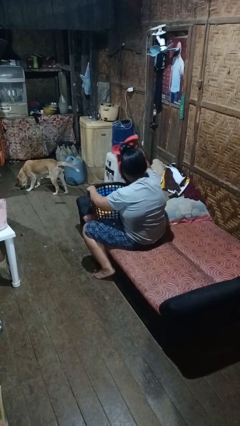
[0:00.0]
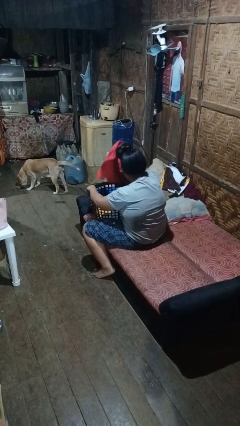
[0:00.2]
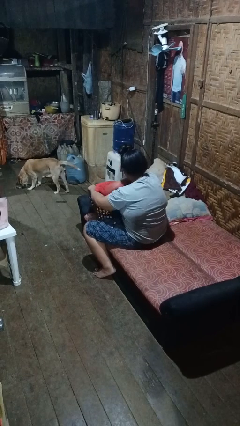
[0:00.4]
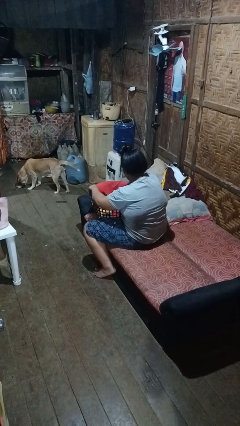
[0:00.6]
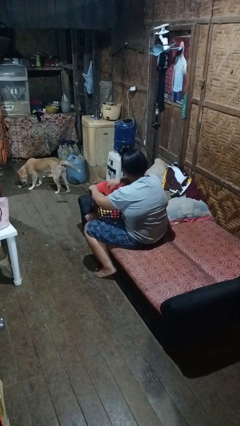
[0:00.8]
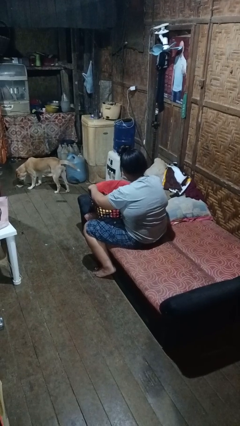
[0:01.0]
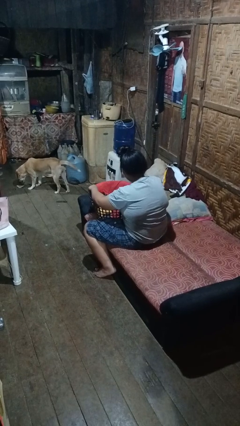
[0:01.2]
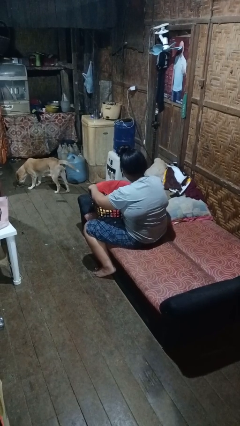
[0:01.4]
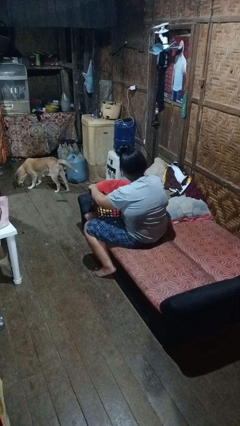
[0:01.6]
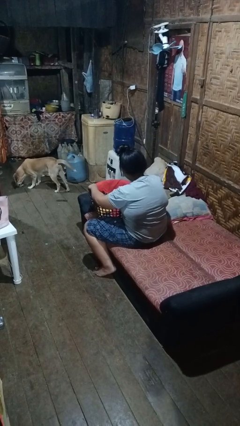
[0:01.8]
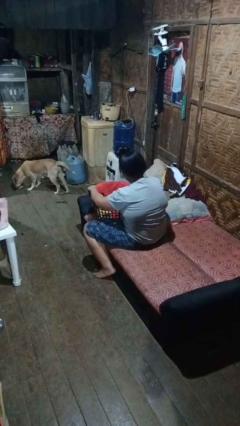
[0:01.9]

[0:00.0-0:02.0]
person puts object into basket

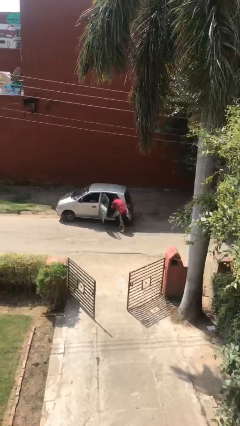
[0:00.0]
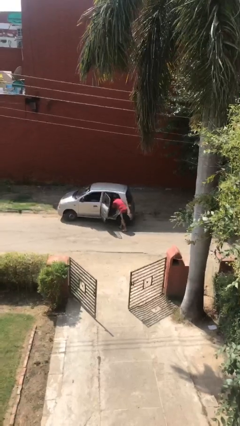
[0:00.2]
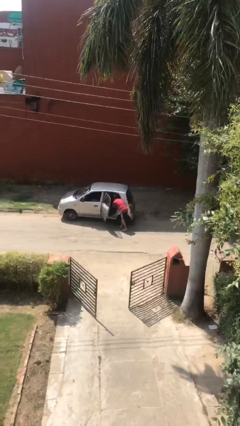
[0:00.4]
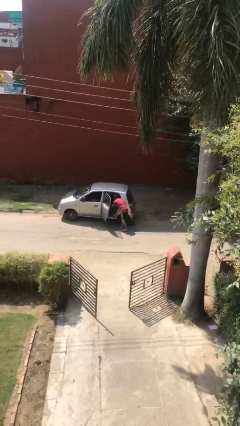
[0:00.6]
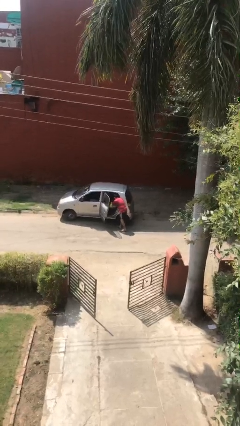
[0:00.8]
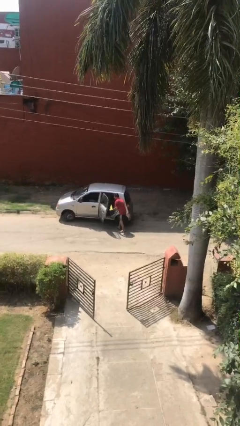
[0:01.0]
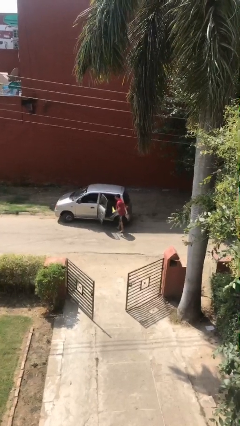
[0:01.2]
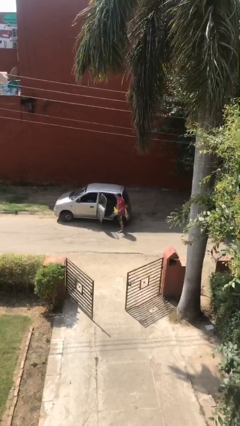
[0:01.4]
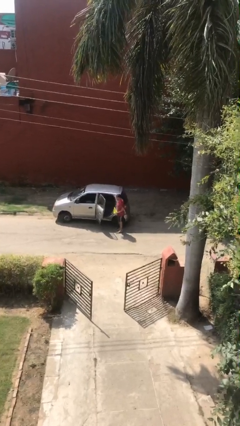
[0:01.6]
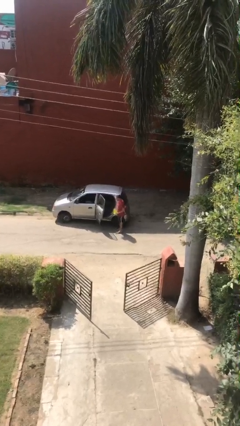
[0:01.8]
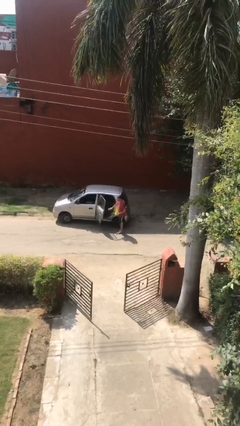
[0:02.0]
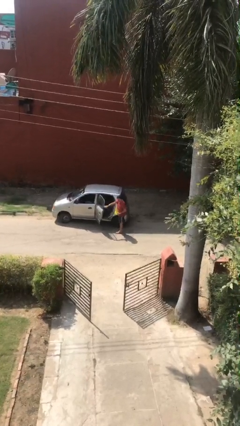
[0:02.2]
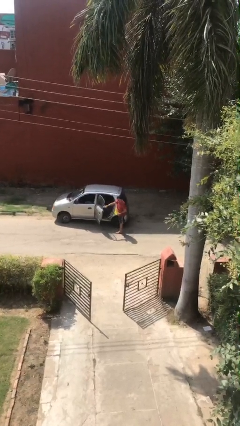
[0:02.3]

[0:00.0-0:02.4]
person unloads car

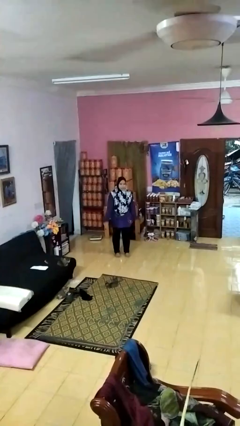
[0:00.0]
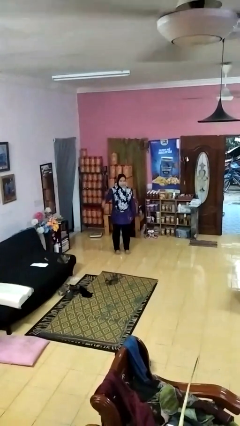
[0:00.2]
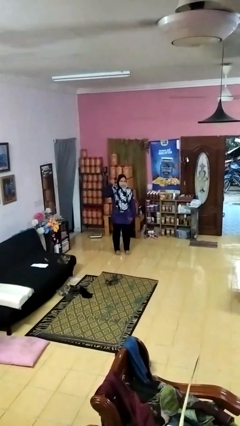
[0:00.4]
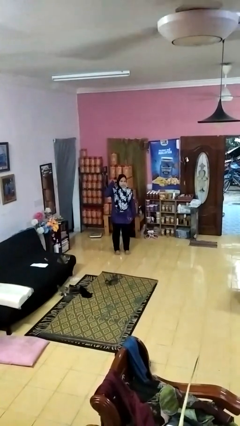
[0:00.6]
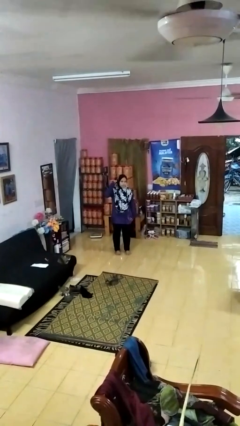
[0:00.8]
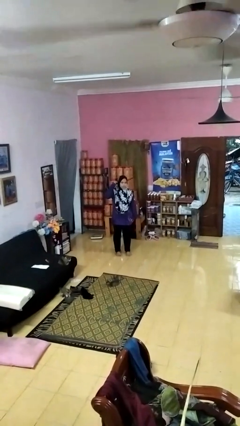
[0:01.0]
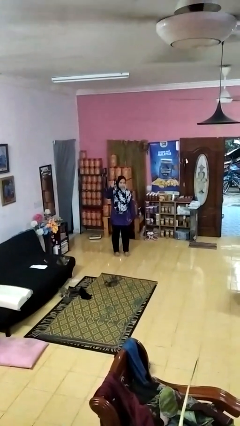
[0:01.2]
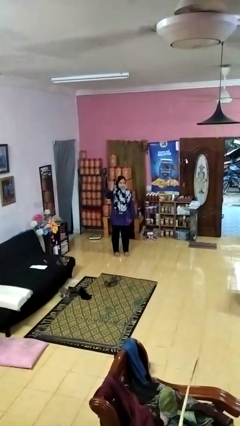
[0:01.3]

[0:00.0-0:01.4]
person gestures behind me

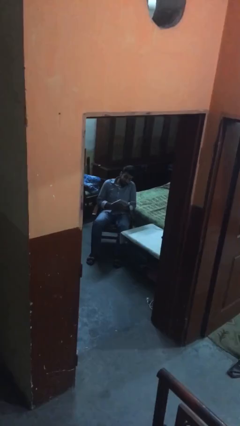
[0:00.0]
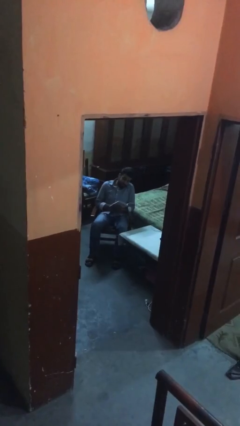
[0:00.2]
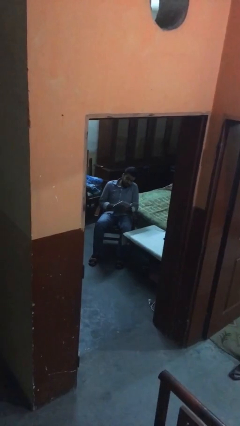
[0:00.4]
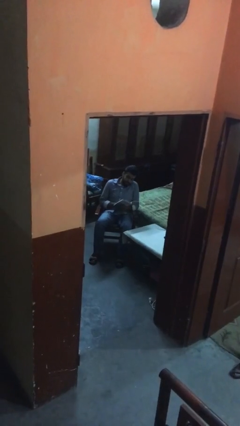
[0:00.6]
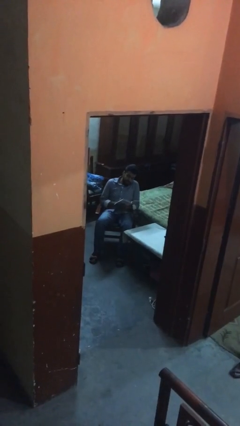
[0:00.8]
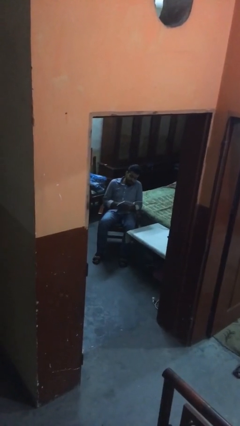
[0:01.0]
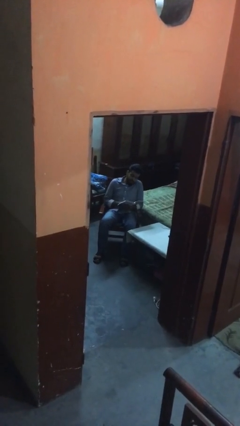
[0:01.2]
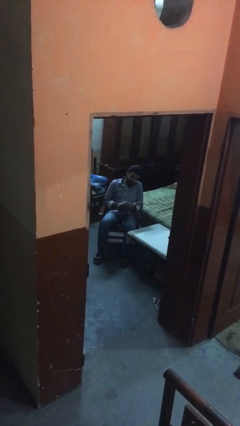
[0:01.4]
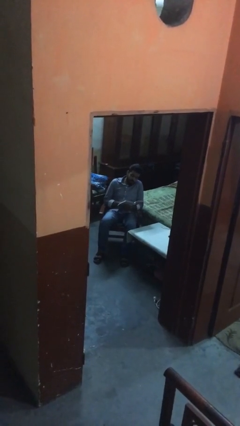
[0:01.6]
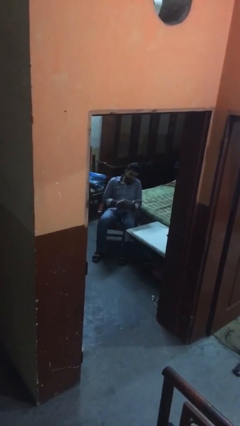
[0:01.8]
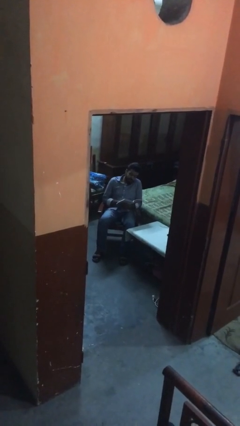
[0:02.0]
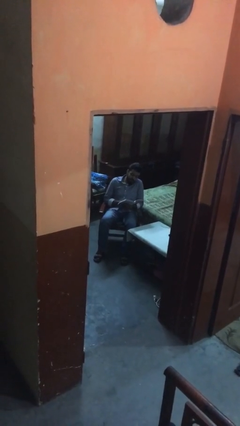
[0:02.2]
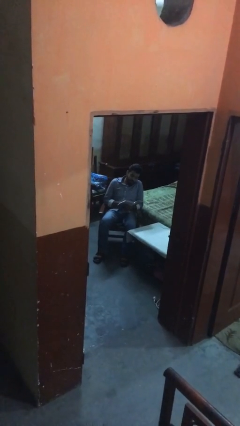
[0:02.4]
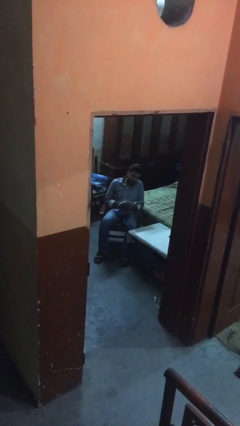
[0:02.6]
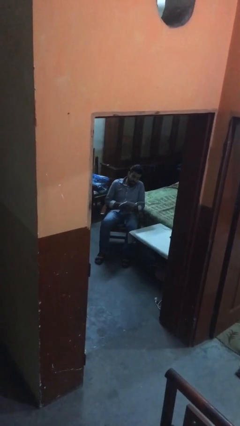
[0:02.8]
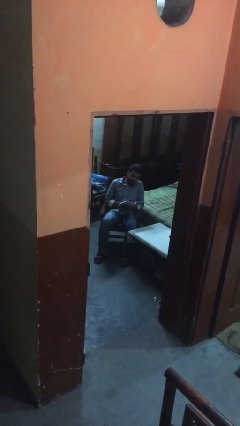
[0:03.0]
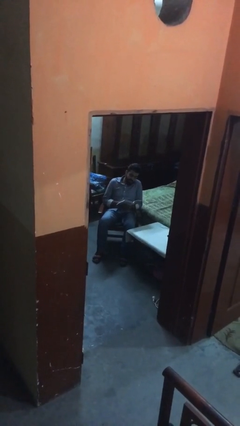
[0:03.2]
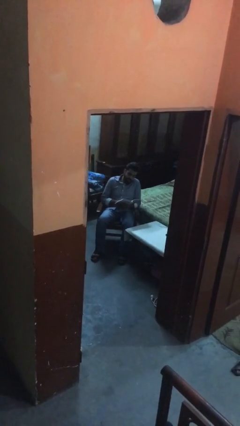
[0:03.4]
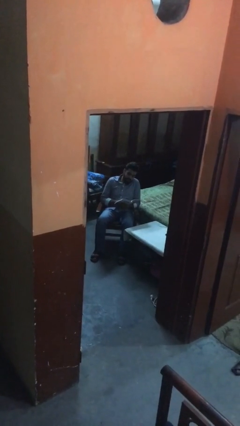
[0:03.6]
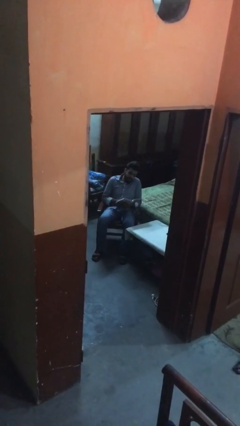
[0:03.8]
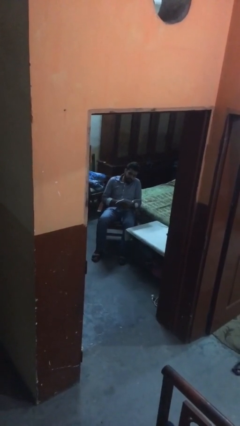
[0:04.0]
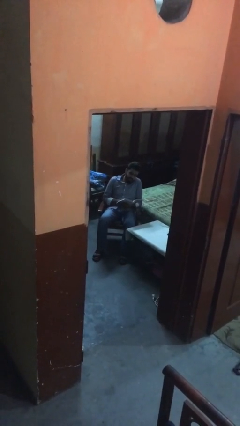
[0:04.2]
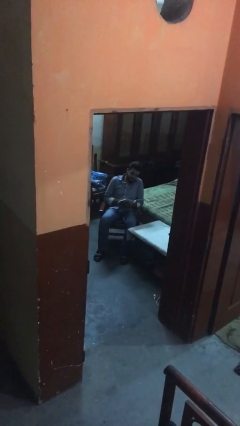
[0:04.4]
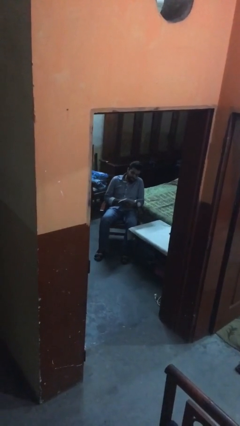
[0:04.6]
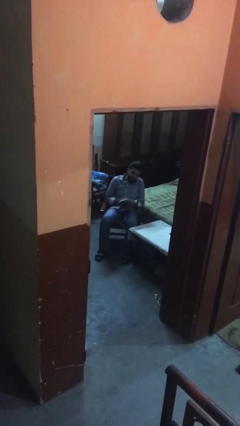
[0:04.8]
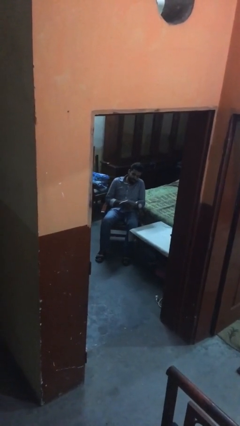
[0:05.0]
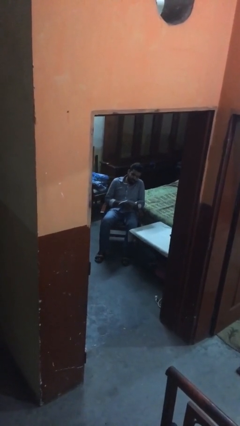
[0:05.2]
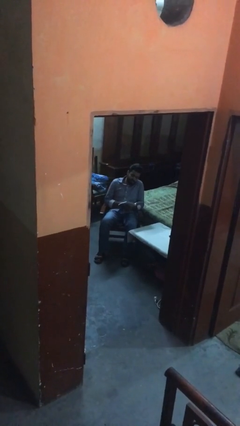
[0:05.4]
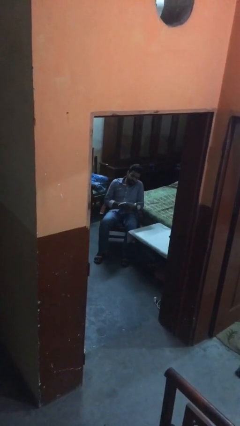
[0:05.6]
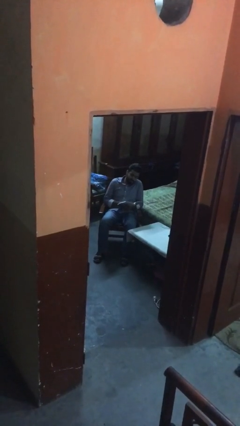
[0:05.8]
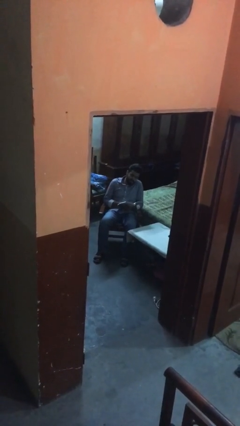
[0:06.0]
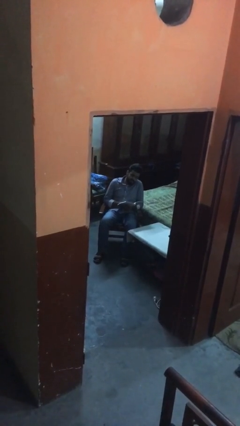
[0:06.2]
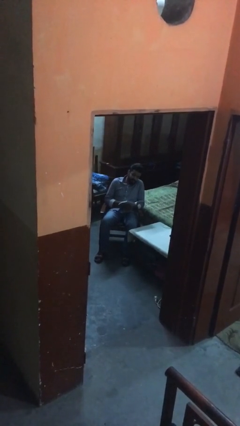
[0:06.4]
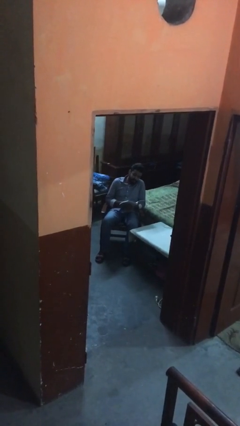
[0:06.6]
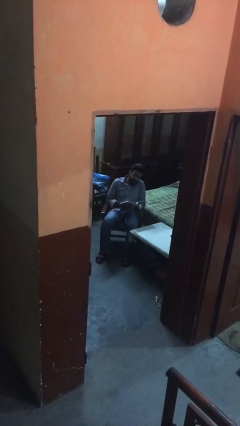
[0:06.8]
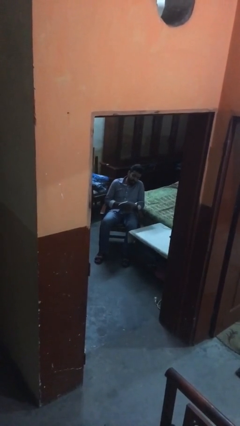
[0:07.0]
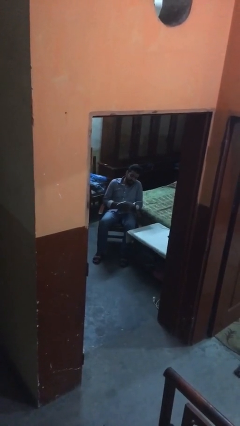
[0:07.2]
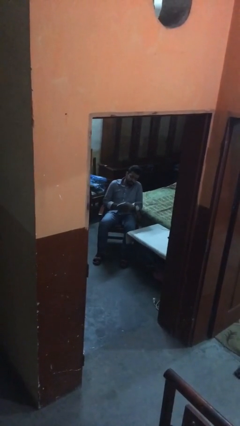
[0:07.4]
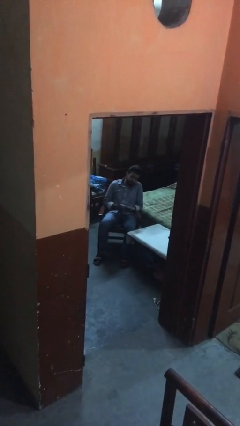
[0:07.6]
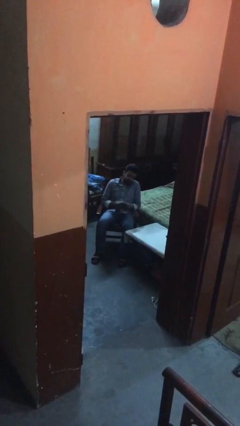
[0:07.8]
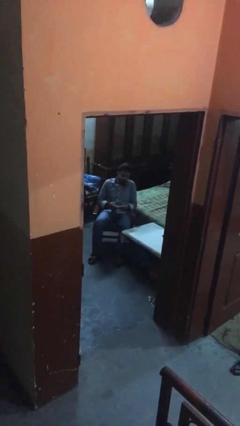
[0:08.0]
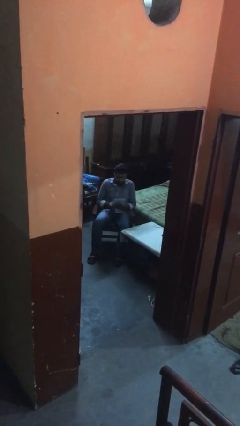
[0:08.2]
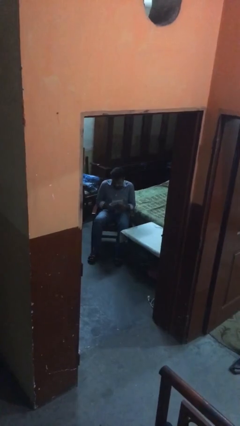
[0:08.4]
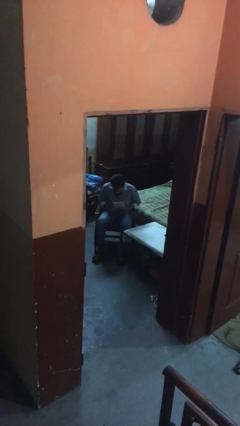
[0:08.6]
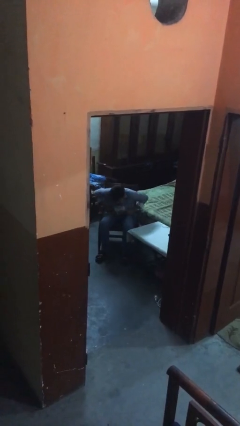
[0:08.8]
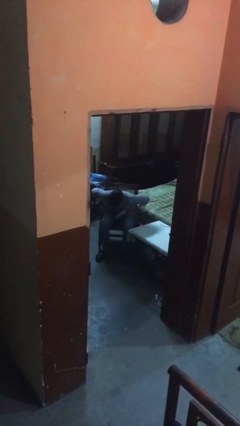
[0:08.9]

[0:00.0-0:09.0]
person reads document

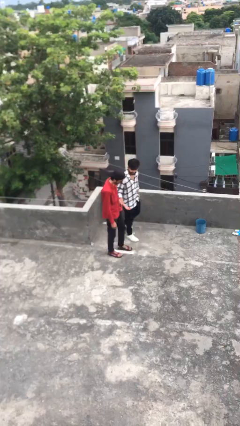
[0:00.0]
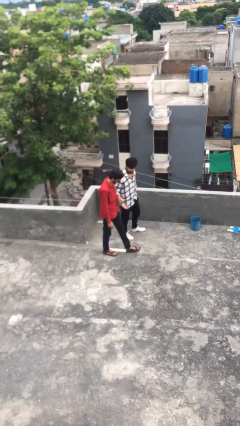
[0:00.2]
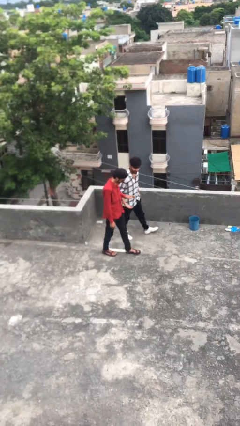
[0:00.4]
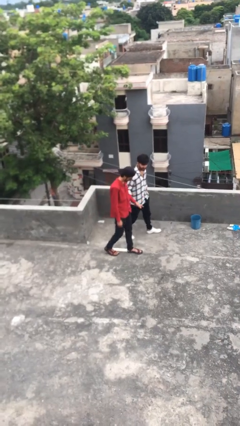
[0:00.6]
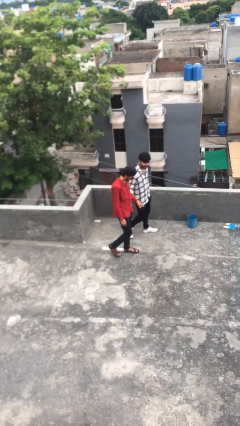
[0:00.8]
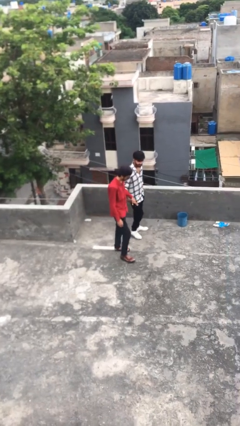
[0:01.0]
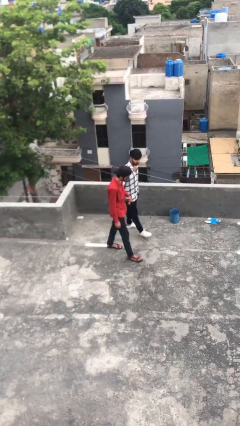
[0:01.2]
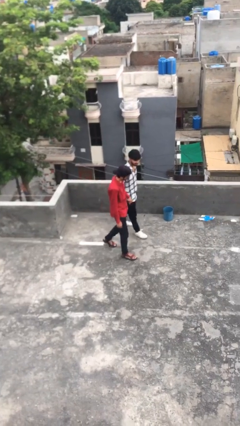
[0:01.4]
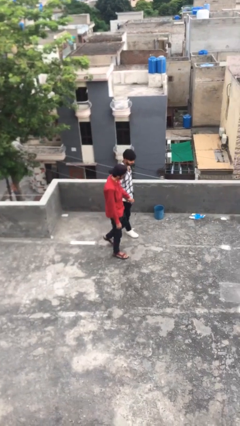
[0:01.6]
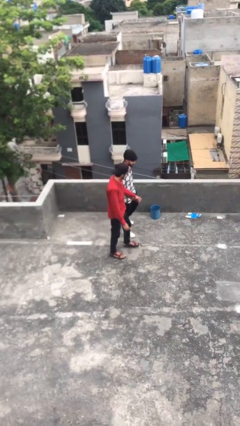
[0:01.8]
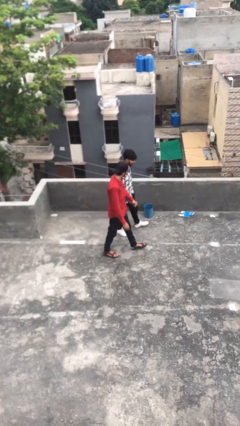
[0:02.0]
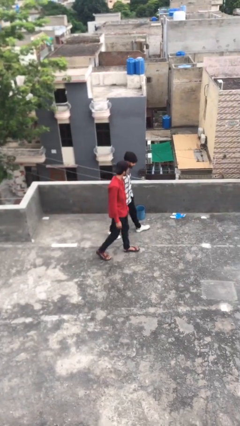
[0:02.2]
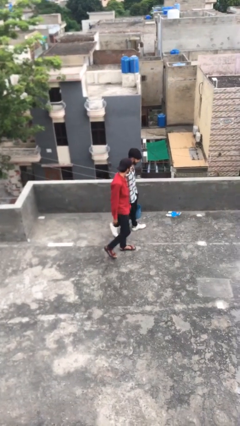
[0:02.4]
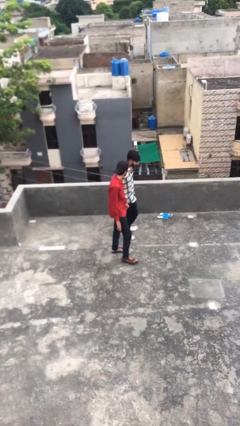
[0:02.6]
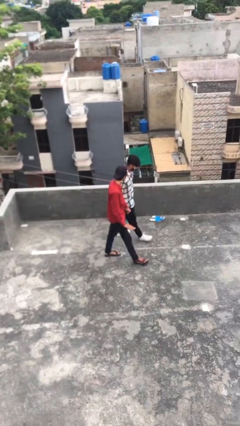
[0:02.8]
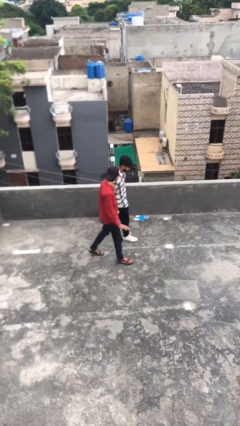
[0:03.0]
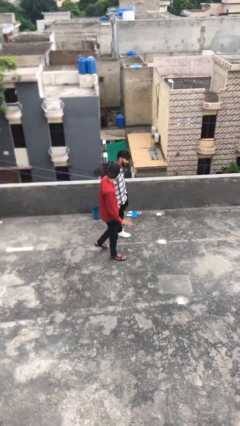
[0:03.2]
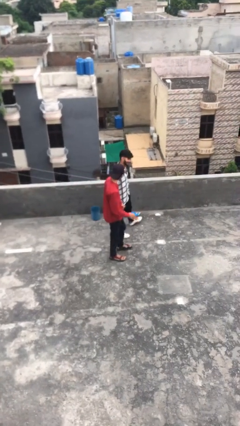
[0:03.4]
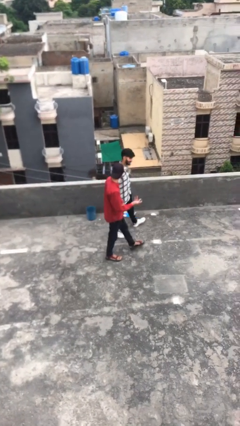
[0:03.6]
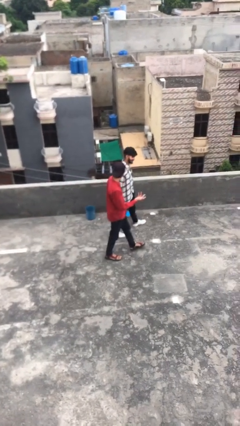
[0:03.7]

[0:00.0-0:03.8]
person holds hand
